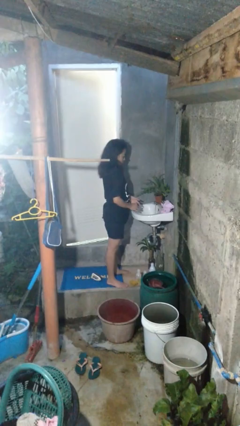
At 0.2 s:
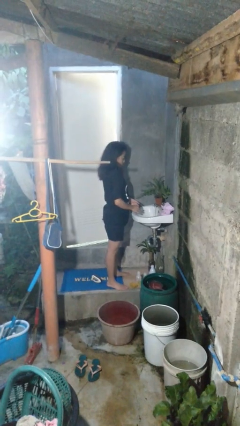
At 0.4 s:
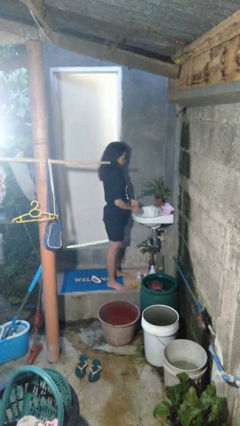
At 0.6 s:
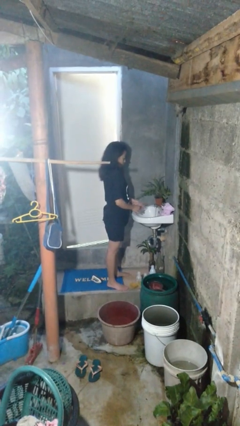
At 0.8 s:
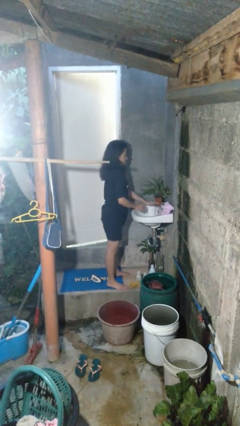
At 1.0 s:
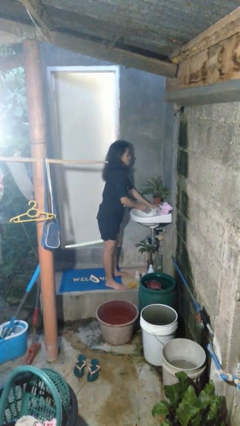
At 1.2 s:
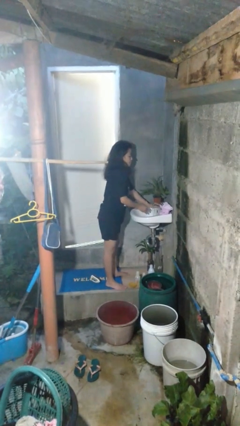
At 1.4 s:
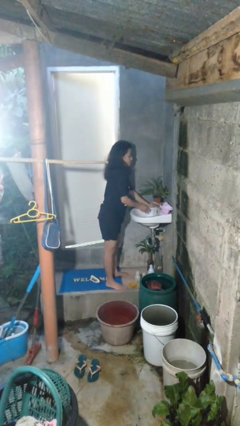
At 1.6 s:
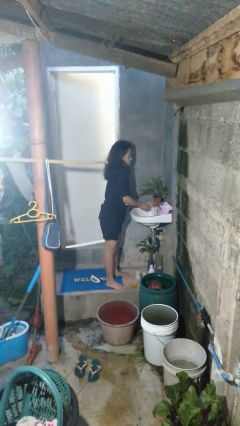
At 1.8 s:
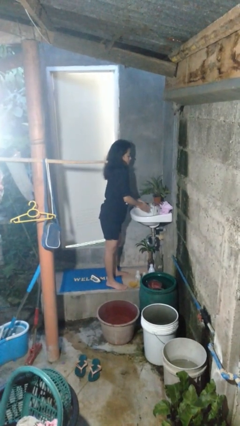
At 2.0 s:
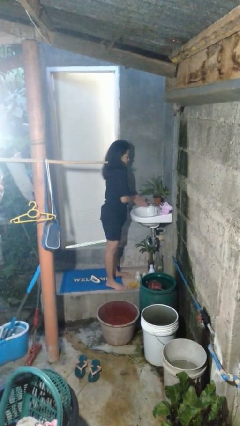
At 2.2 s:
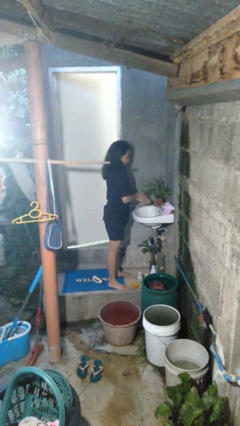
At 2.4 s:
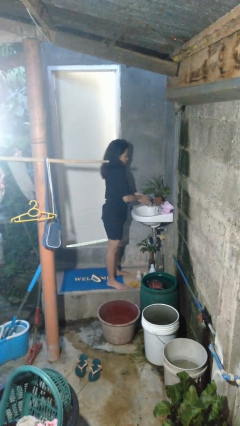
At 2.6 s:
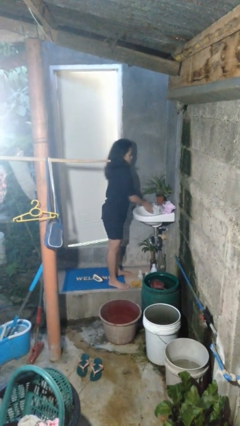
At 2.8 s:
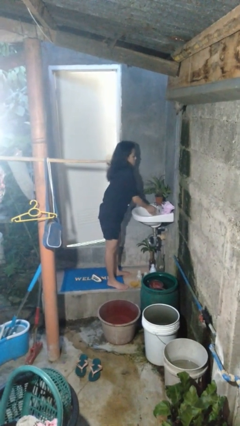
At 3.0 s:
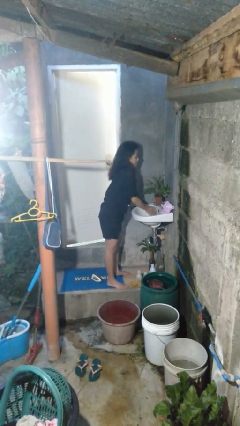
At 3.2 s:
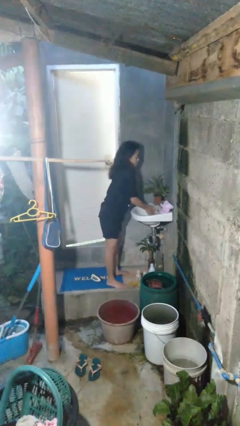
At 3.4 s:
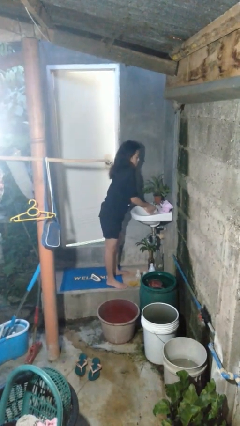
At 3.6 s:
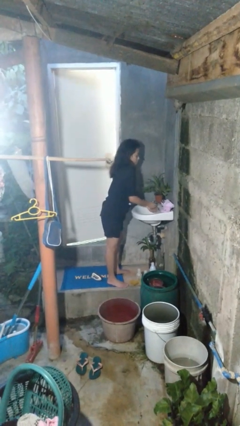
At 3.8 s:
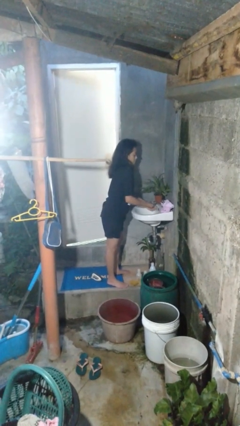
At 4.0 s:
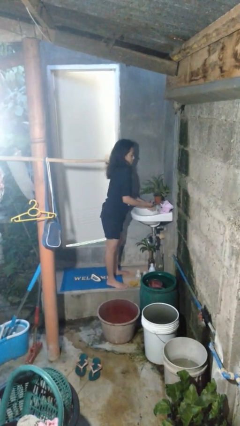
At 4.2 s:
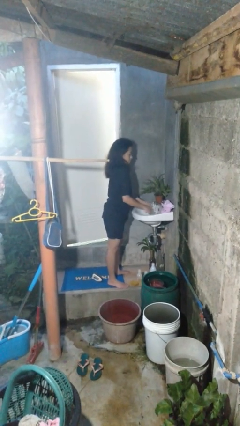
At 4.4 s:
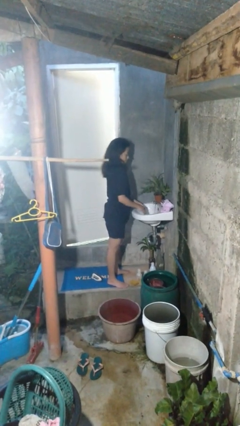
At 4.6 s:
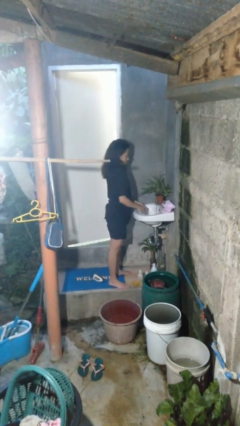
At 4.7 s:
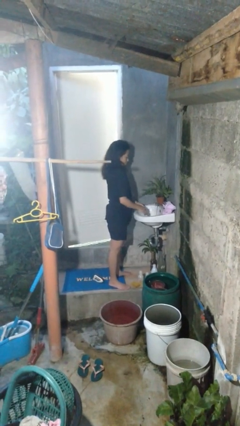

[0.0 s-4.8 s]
person washes hands

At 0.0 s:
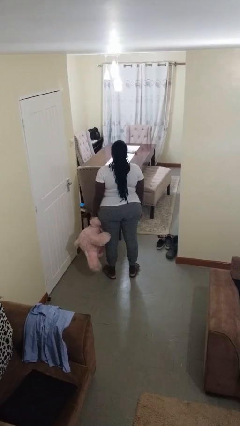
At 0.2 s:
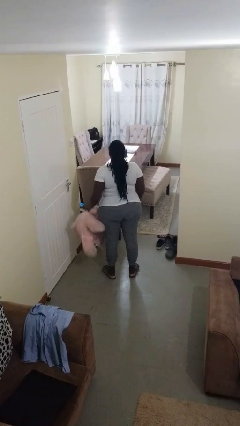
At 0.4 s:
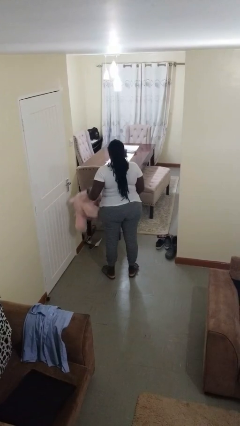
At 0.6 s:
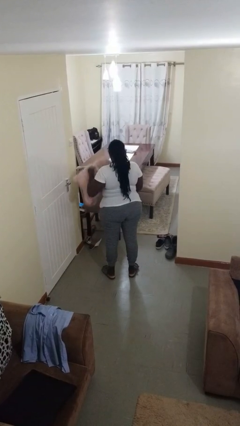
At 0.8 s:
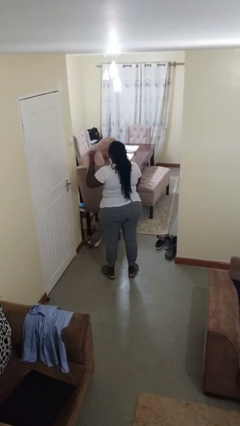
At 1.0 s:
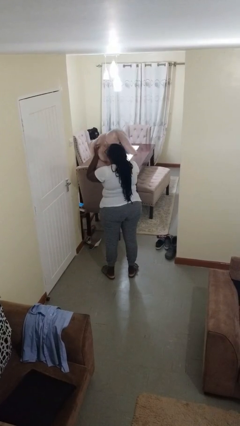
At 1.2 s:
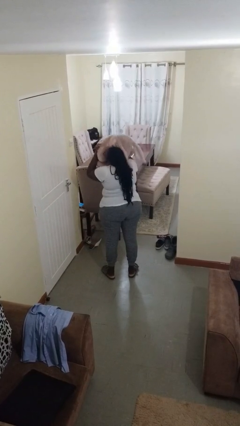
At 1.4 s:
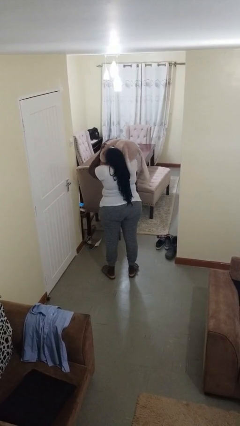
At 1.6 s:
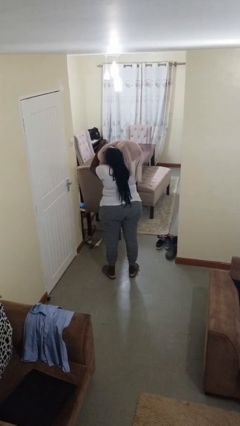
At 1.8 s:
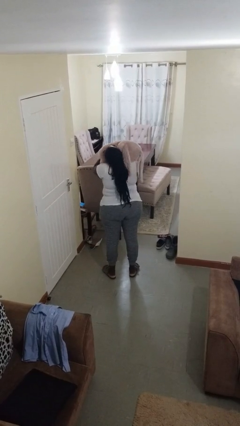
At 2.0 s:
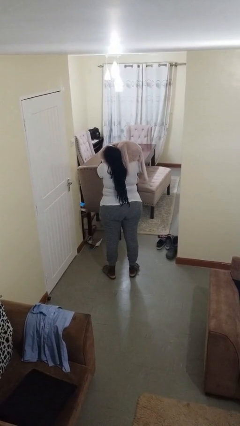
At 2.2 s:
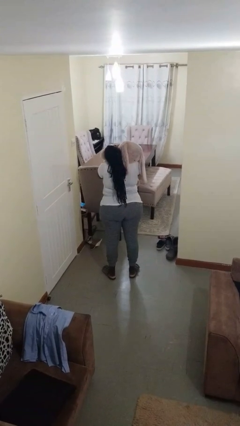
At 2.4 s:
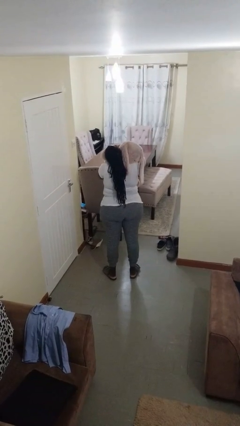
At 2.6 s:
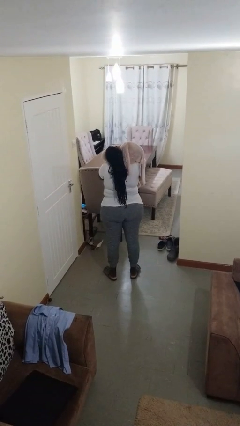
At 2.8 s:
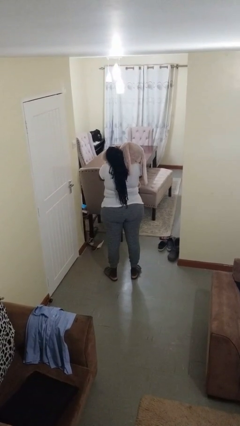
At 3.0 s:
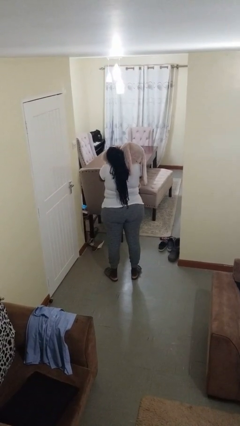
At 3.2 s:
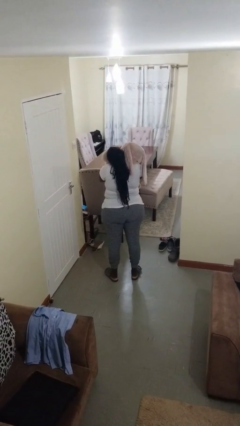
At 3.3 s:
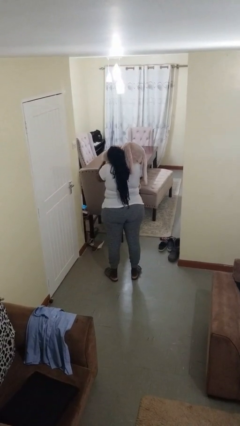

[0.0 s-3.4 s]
person hugs stuffed animal

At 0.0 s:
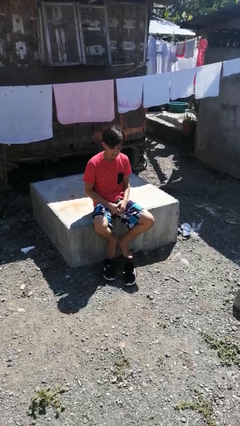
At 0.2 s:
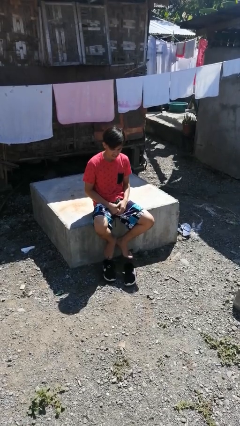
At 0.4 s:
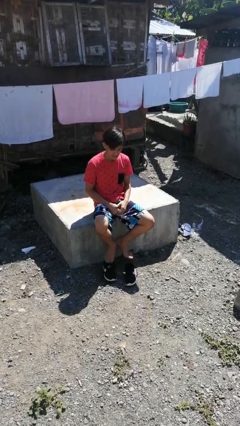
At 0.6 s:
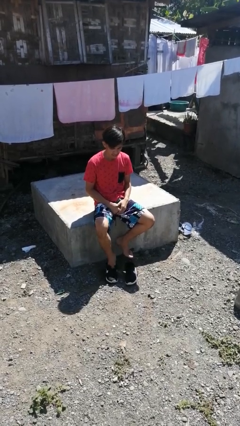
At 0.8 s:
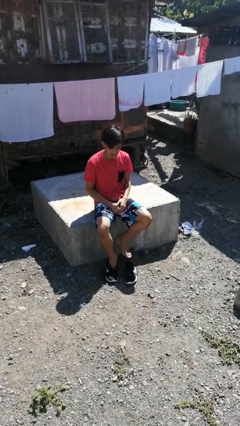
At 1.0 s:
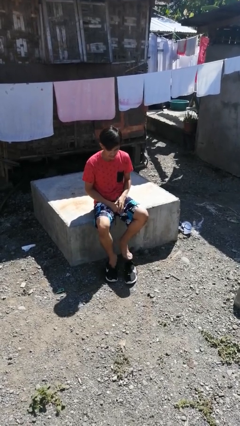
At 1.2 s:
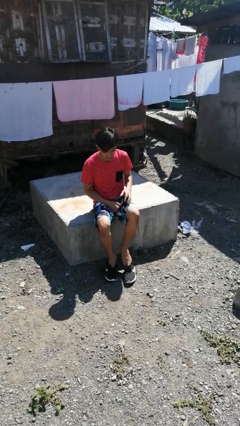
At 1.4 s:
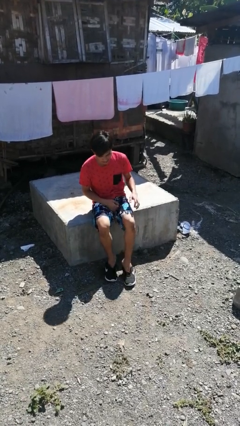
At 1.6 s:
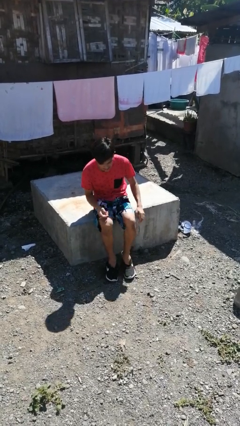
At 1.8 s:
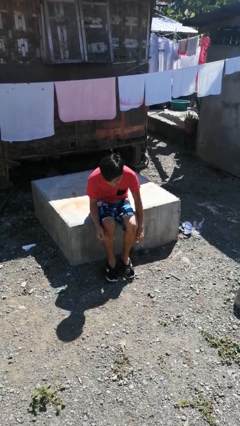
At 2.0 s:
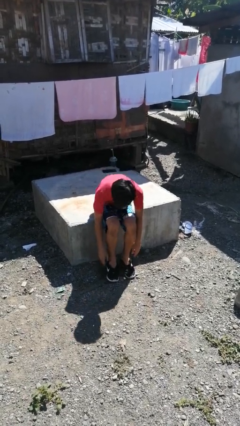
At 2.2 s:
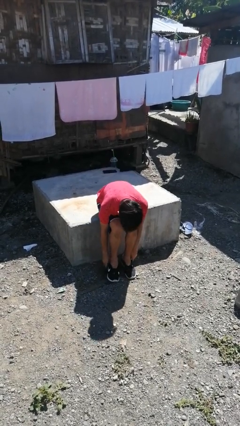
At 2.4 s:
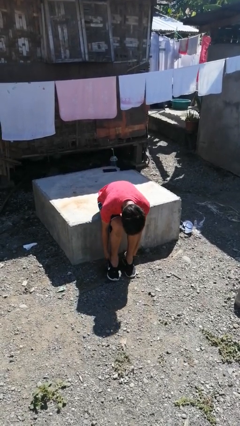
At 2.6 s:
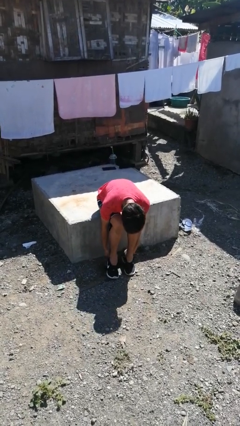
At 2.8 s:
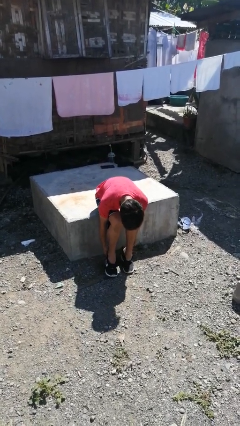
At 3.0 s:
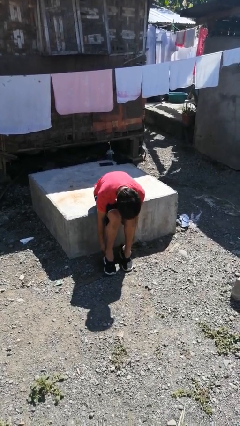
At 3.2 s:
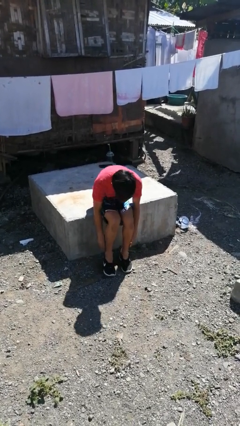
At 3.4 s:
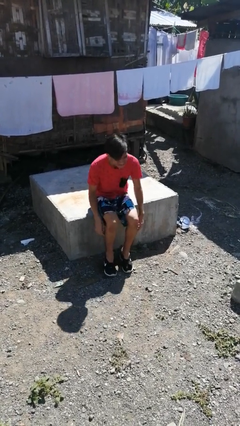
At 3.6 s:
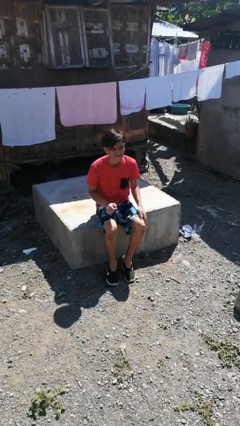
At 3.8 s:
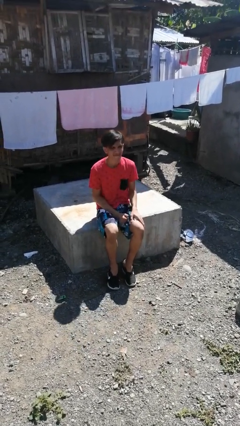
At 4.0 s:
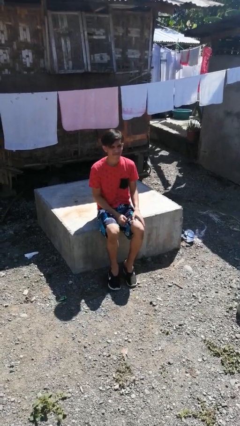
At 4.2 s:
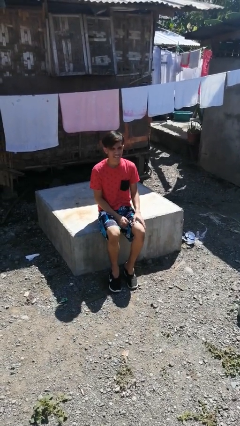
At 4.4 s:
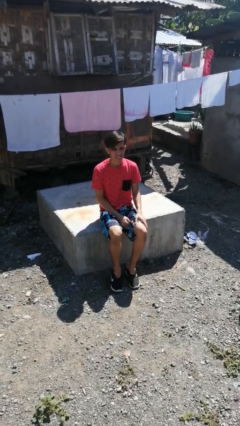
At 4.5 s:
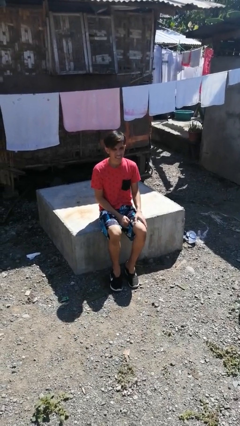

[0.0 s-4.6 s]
person puts on shoes

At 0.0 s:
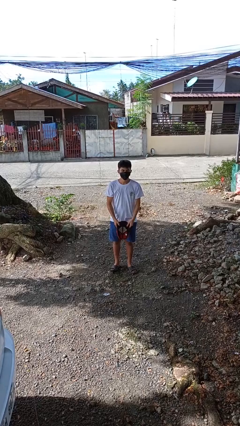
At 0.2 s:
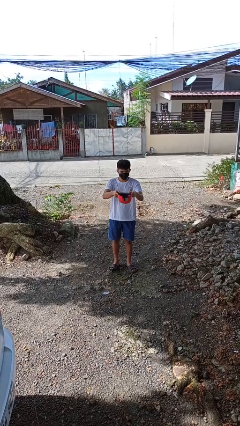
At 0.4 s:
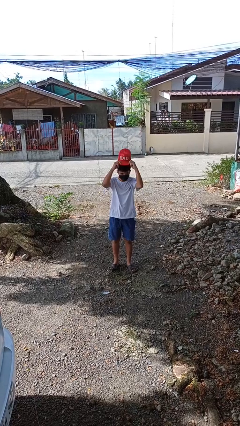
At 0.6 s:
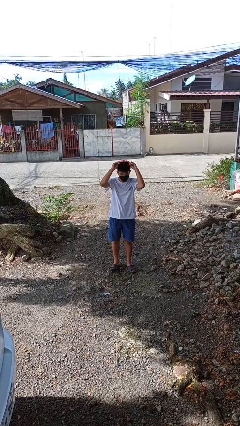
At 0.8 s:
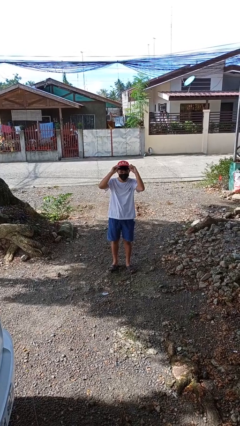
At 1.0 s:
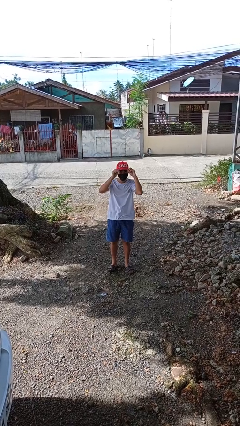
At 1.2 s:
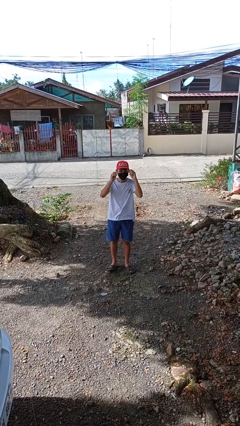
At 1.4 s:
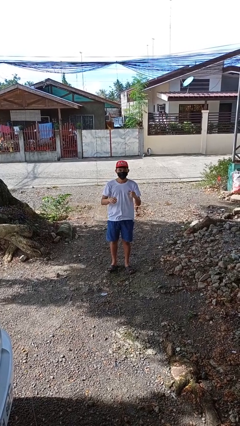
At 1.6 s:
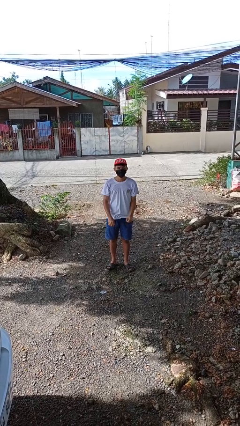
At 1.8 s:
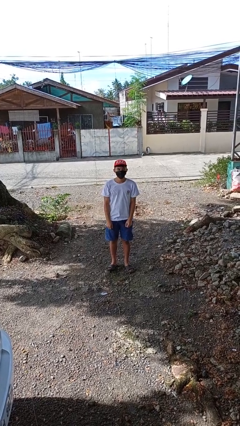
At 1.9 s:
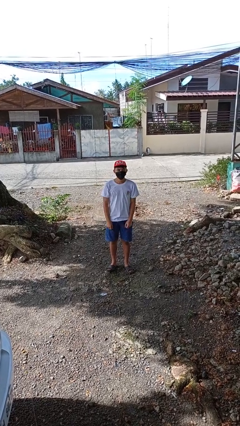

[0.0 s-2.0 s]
person puts on hat

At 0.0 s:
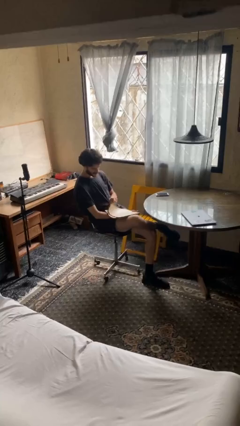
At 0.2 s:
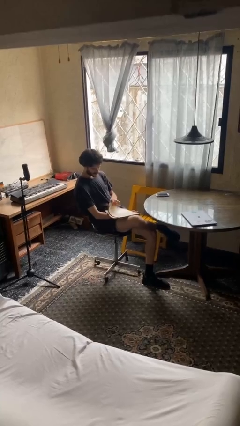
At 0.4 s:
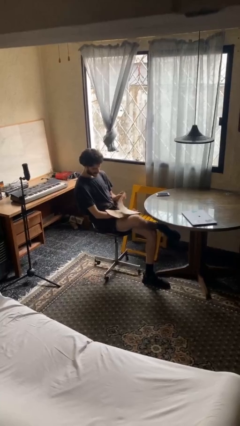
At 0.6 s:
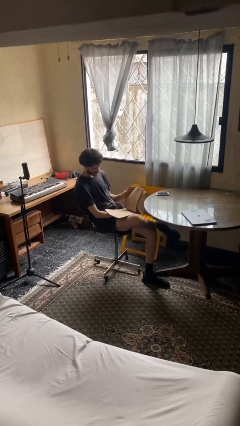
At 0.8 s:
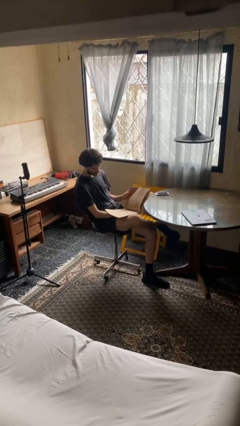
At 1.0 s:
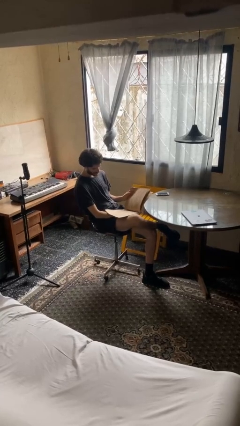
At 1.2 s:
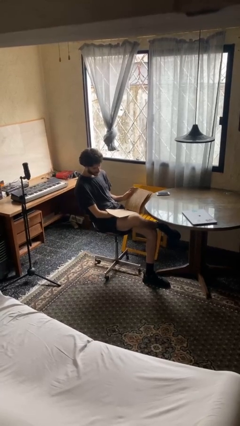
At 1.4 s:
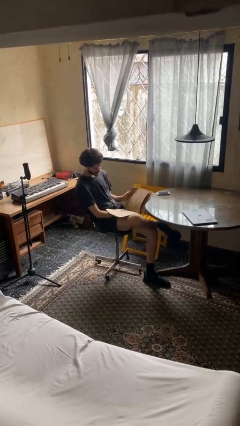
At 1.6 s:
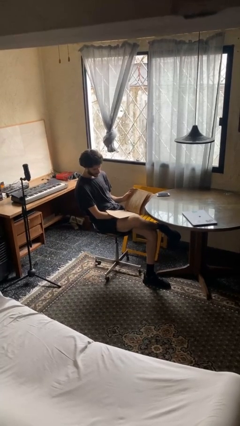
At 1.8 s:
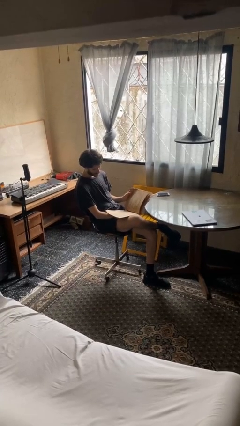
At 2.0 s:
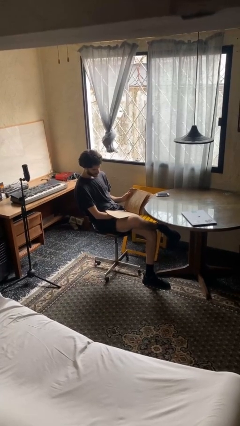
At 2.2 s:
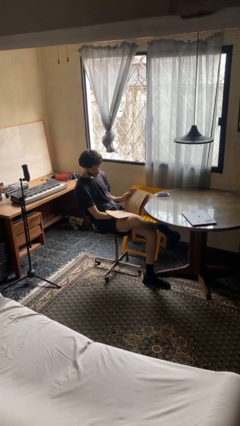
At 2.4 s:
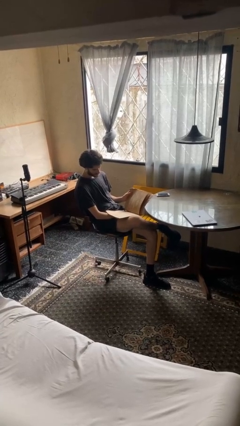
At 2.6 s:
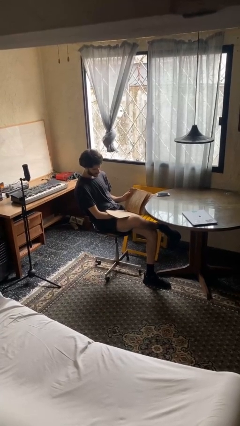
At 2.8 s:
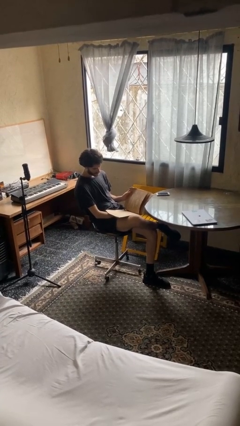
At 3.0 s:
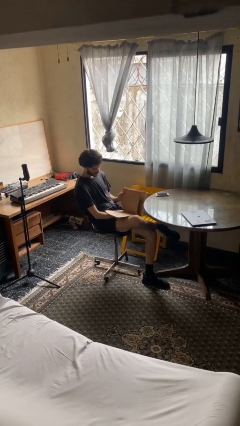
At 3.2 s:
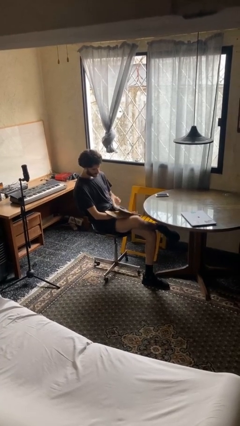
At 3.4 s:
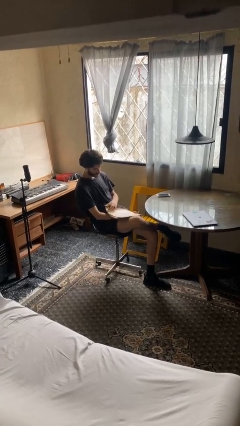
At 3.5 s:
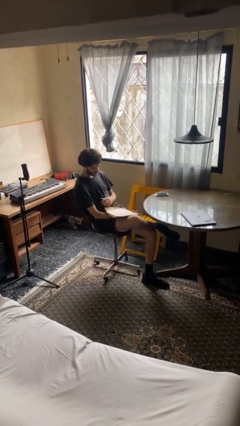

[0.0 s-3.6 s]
person reads document
